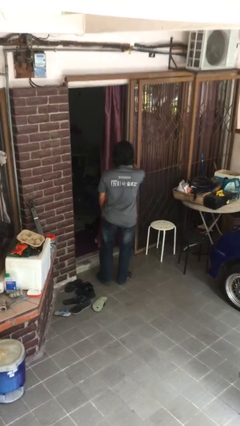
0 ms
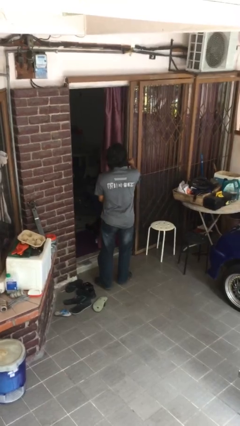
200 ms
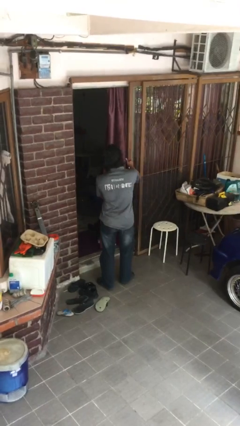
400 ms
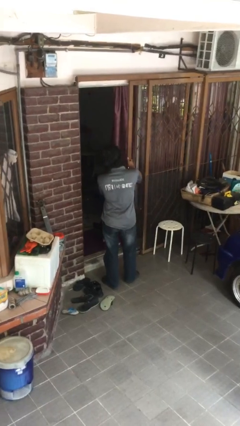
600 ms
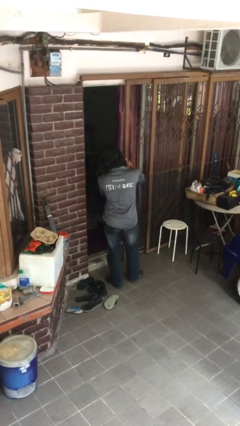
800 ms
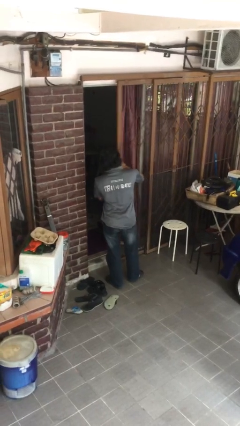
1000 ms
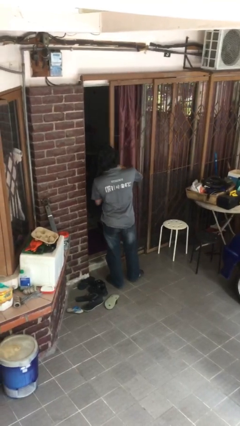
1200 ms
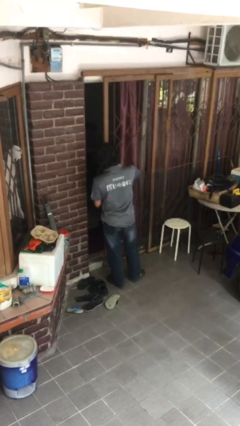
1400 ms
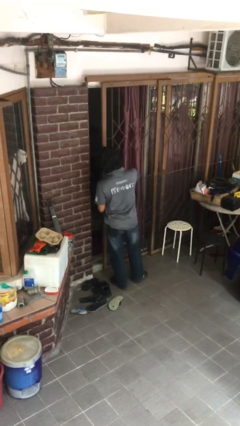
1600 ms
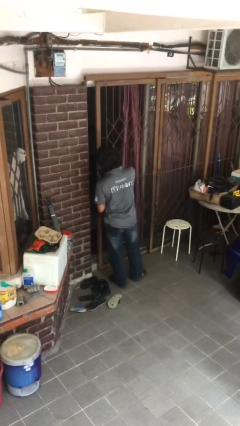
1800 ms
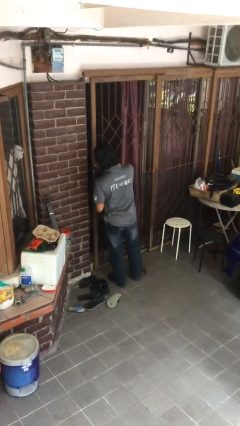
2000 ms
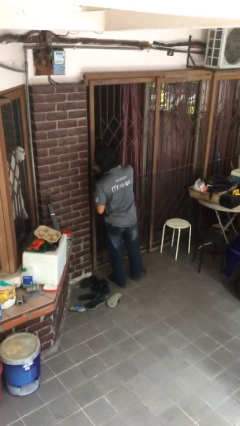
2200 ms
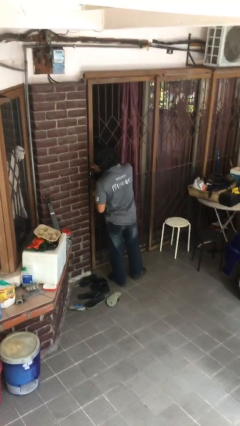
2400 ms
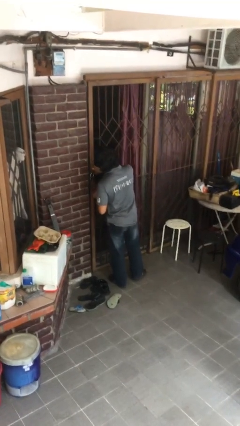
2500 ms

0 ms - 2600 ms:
person closes facility door

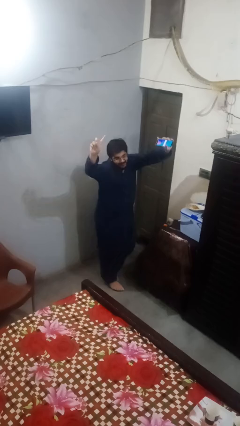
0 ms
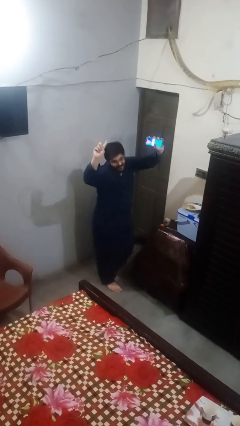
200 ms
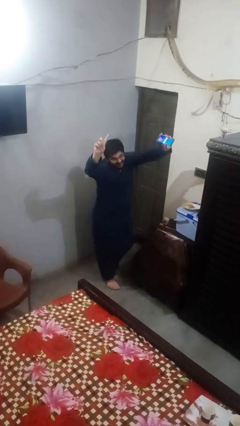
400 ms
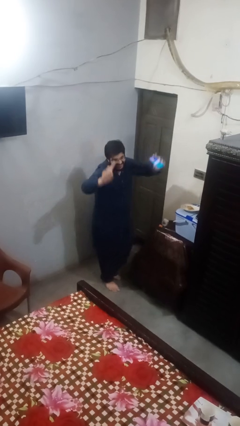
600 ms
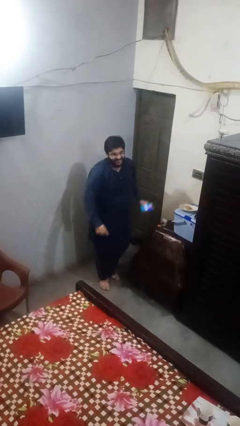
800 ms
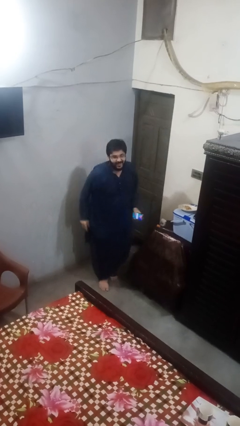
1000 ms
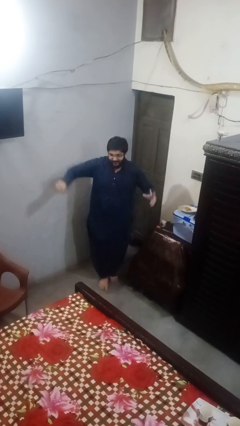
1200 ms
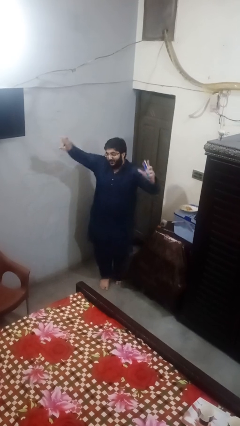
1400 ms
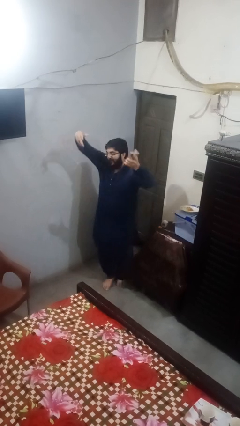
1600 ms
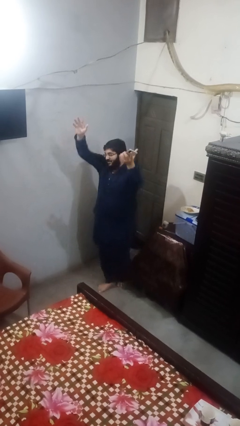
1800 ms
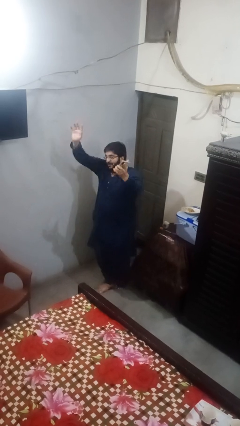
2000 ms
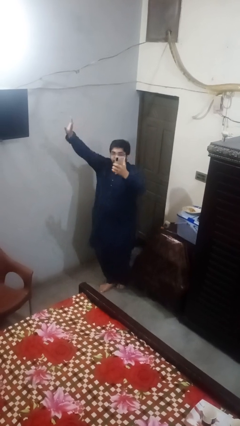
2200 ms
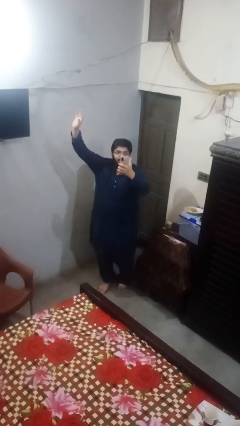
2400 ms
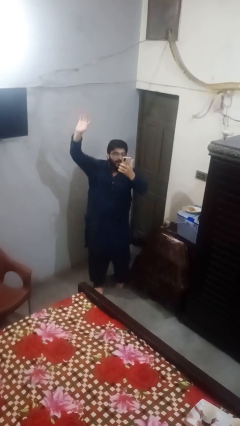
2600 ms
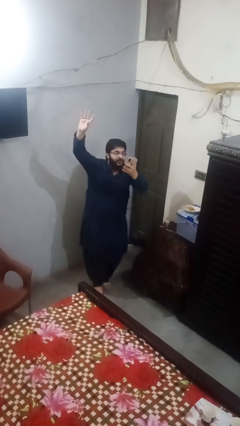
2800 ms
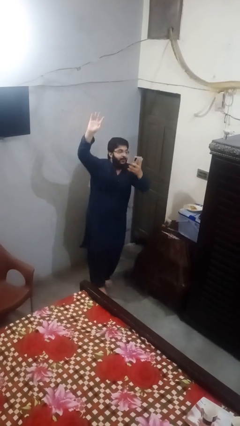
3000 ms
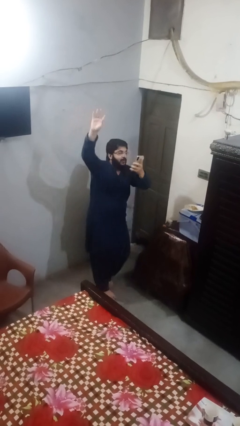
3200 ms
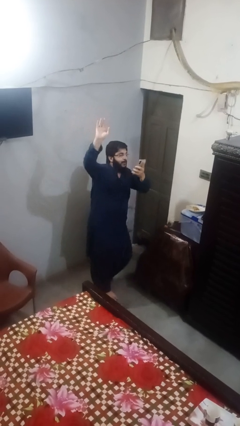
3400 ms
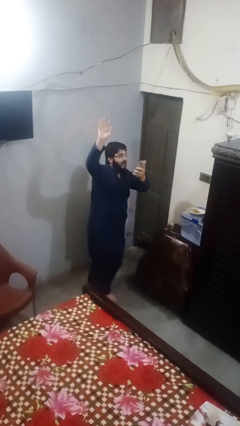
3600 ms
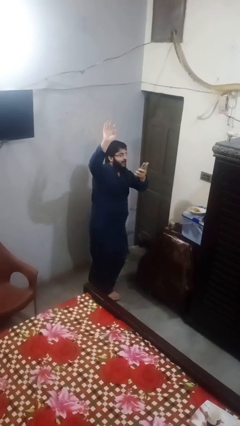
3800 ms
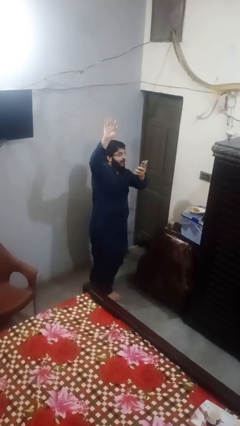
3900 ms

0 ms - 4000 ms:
person dances in place

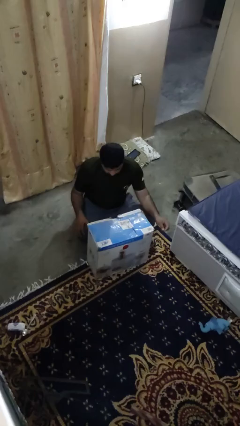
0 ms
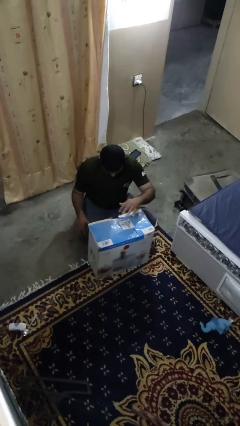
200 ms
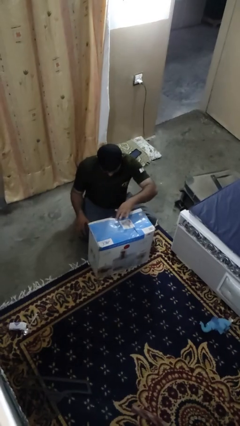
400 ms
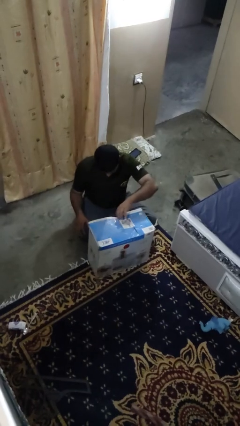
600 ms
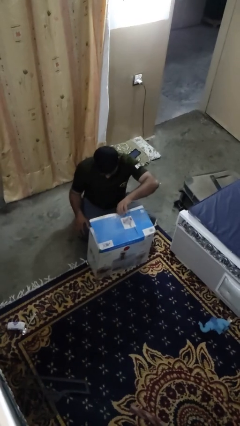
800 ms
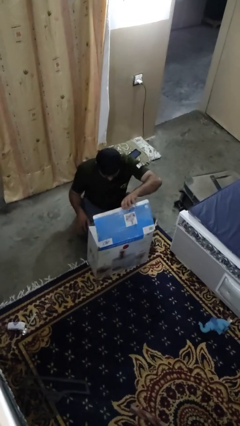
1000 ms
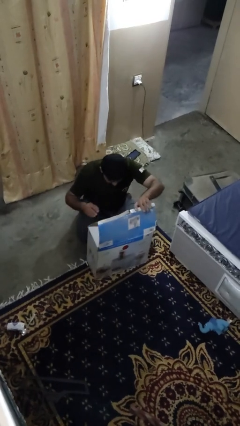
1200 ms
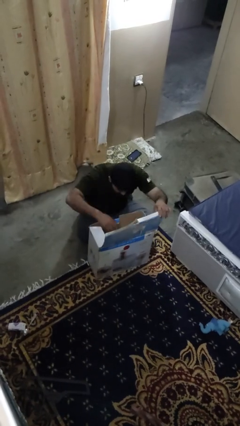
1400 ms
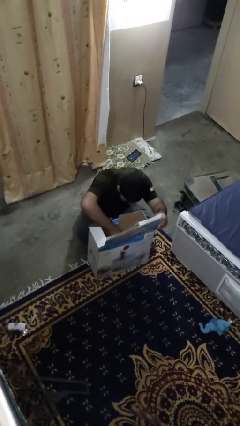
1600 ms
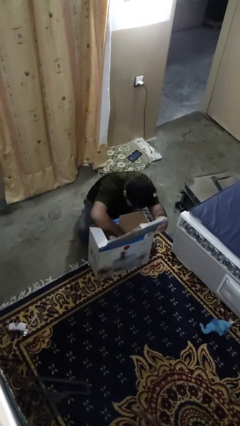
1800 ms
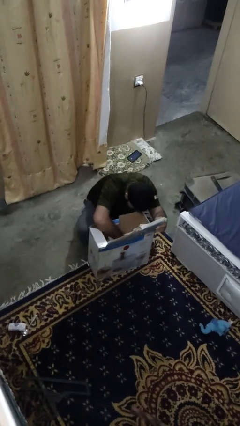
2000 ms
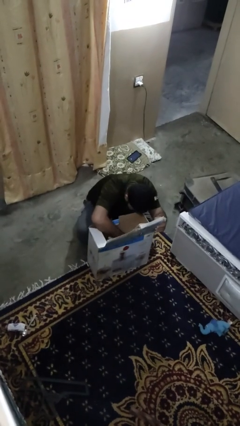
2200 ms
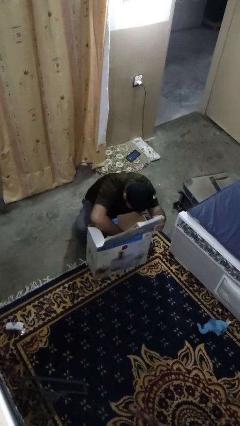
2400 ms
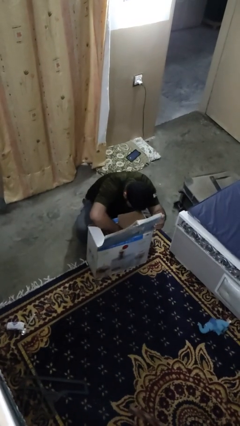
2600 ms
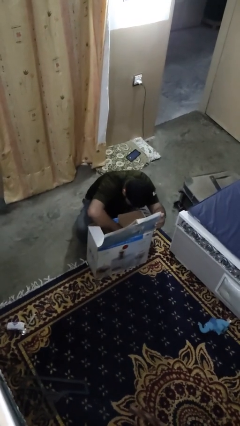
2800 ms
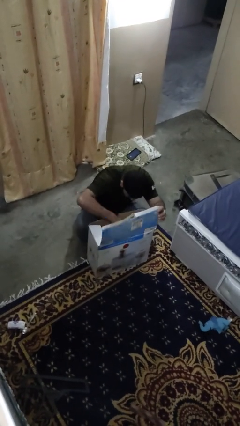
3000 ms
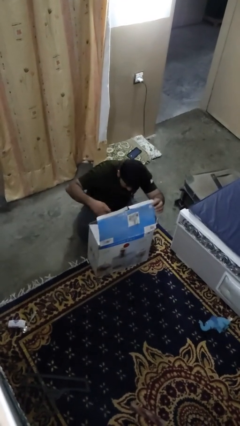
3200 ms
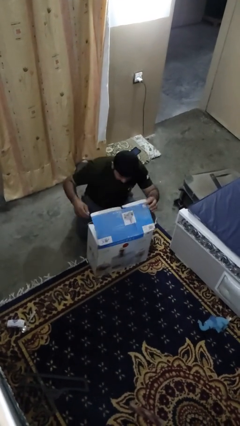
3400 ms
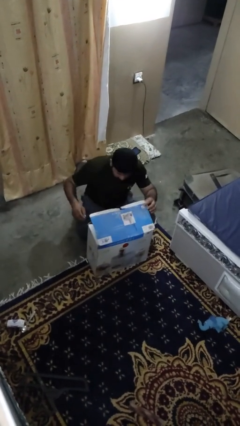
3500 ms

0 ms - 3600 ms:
person searches in box

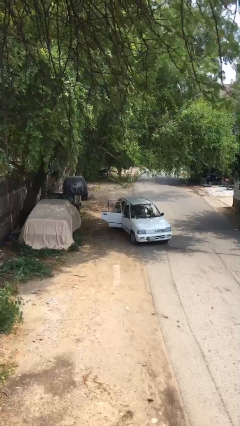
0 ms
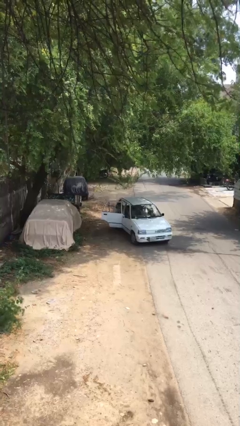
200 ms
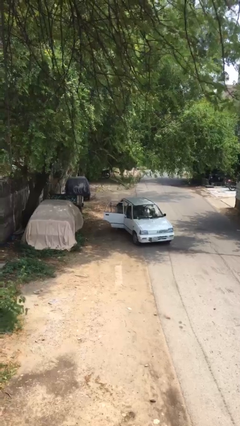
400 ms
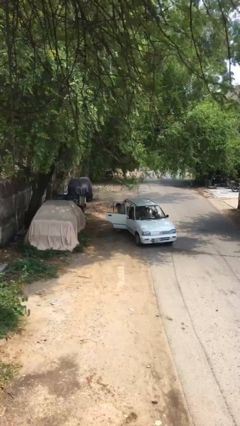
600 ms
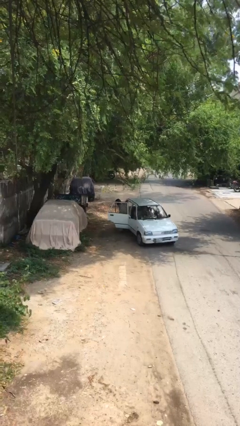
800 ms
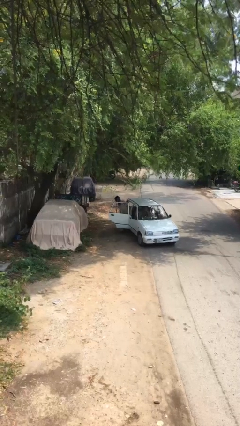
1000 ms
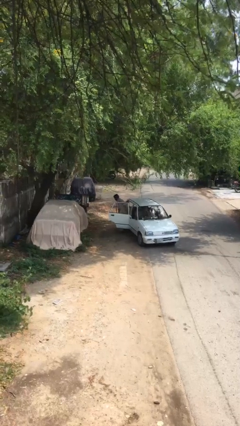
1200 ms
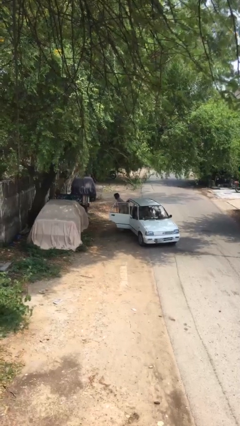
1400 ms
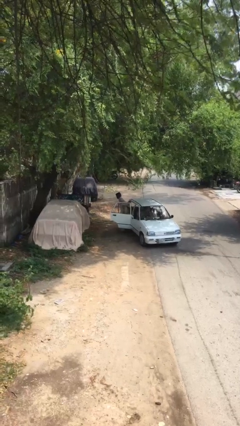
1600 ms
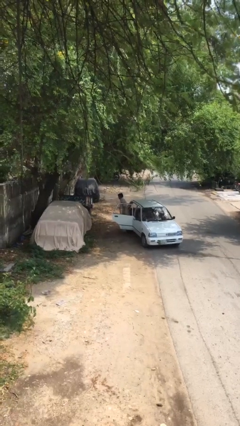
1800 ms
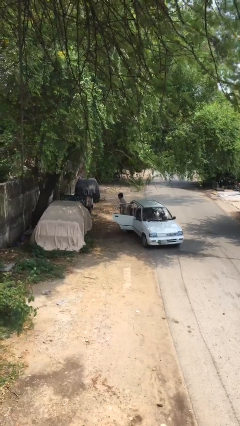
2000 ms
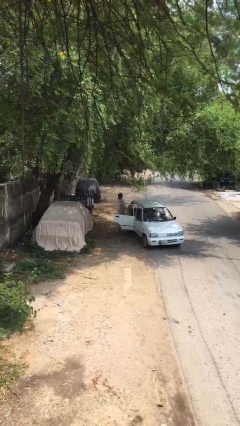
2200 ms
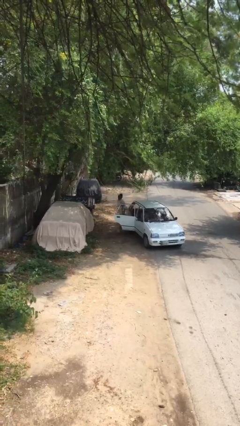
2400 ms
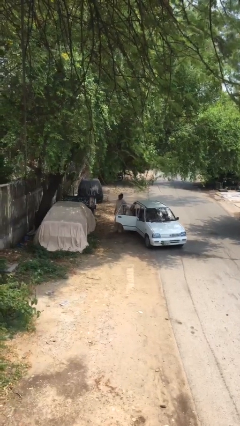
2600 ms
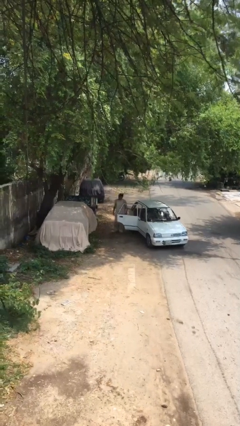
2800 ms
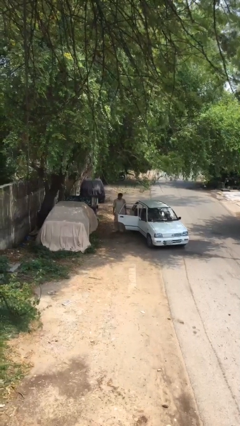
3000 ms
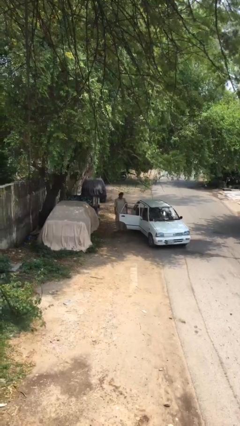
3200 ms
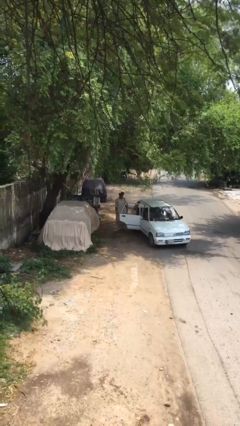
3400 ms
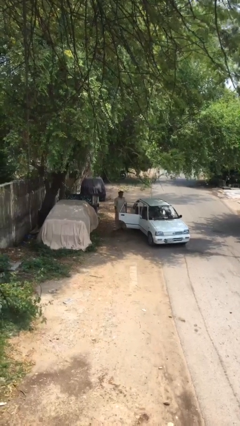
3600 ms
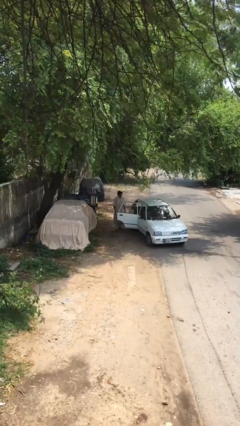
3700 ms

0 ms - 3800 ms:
person exits car

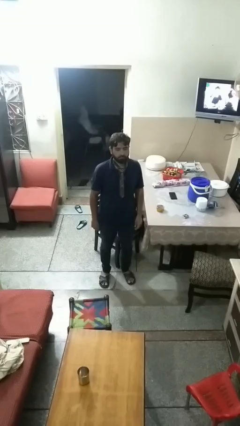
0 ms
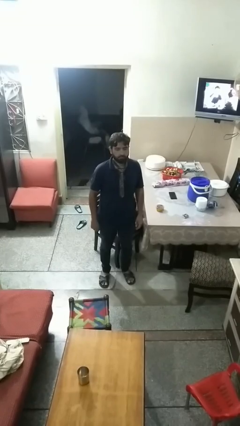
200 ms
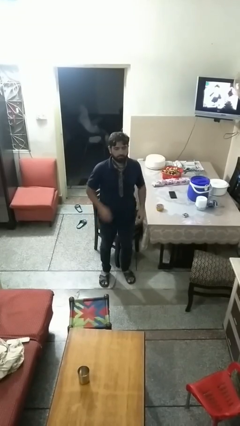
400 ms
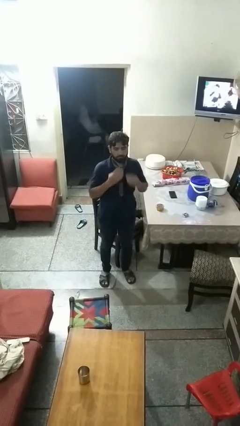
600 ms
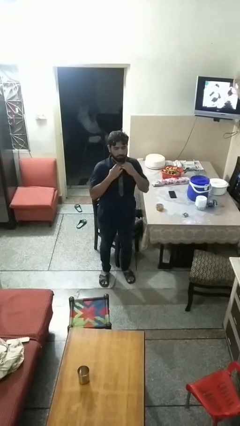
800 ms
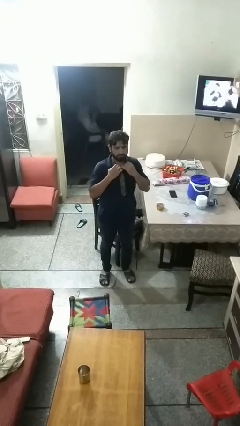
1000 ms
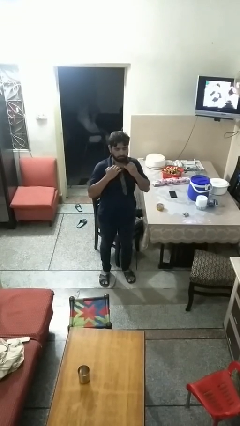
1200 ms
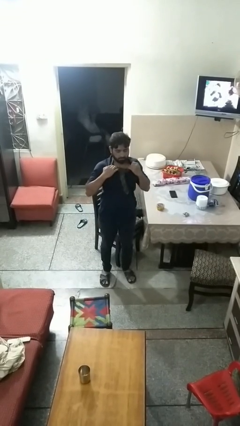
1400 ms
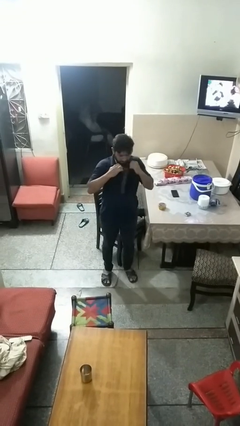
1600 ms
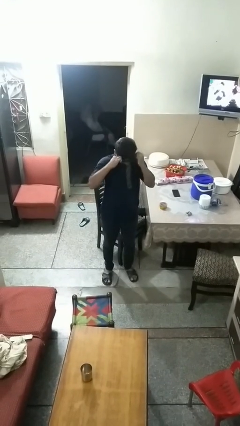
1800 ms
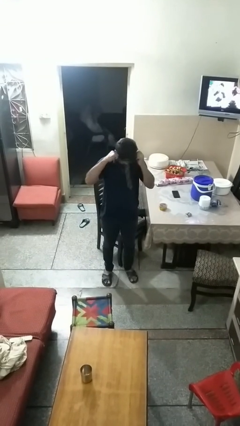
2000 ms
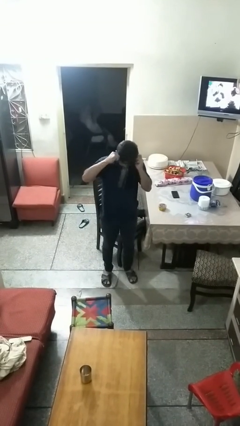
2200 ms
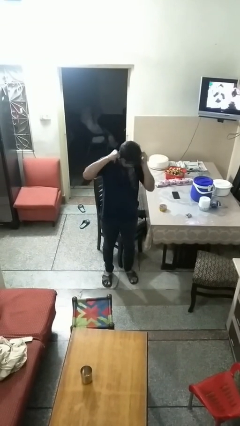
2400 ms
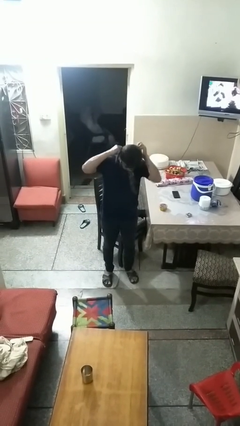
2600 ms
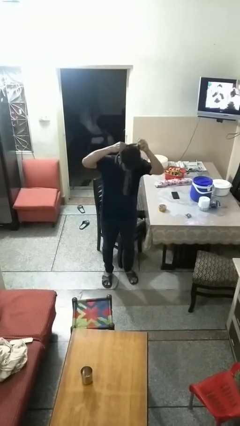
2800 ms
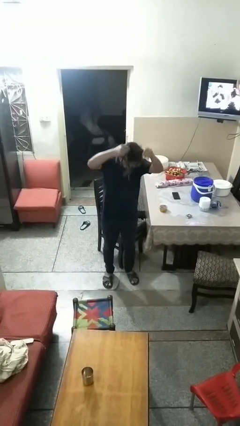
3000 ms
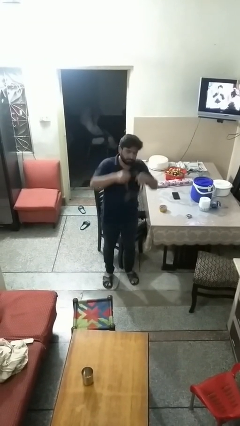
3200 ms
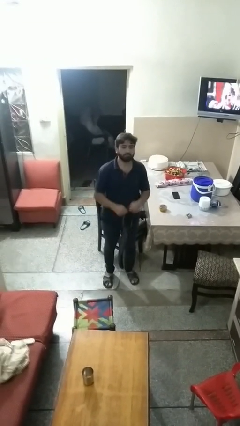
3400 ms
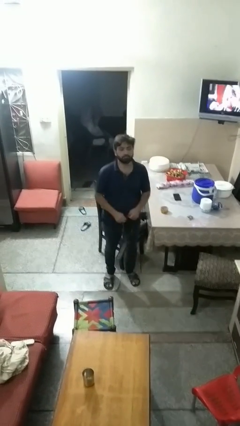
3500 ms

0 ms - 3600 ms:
person takes off necktie
